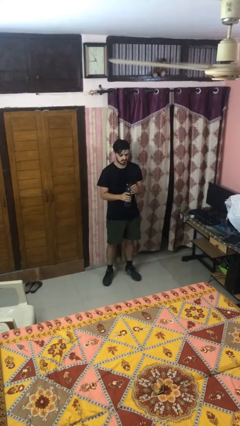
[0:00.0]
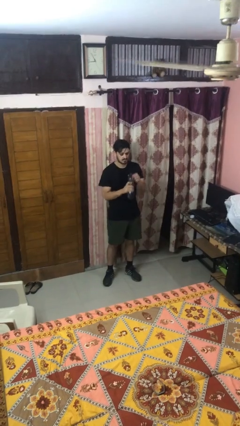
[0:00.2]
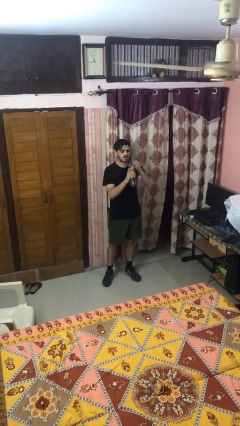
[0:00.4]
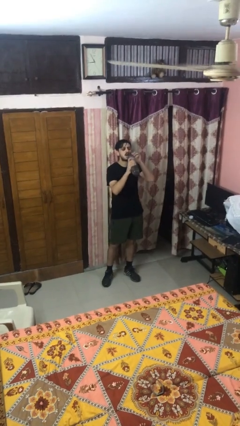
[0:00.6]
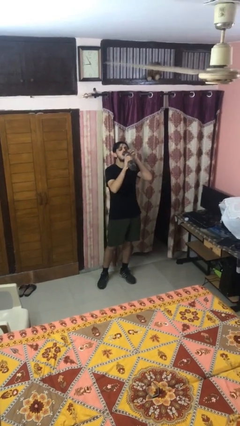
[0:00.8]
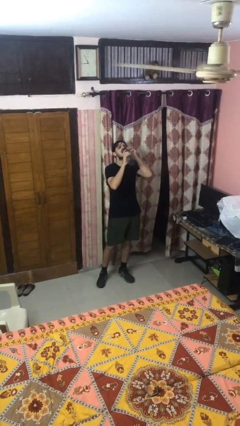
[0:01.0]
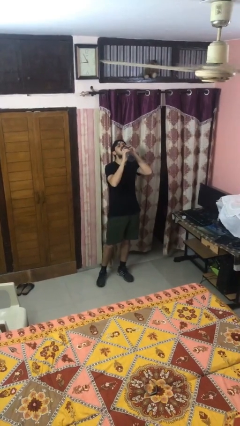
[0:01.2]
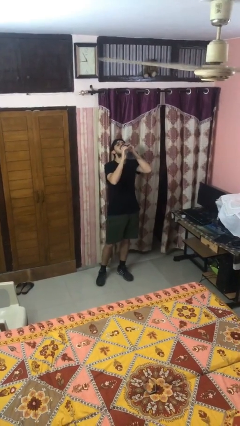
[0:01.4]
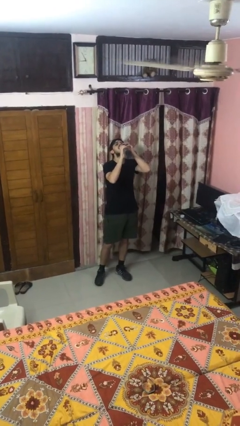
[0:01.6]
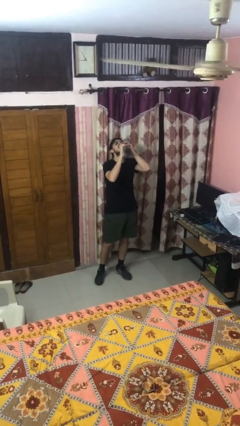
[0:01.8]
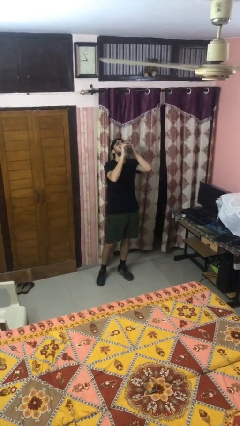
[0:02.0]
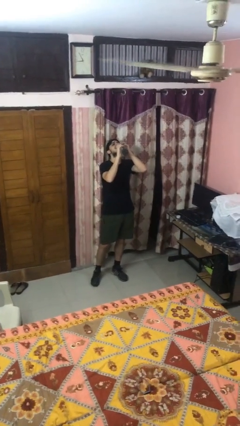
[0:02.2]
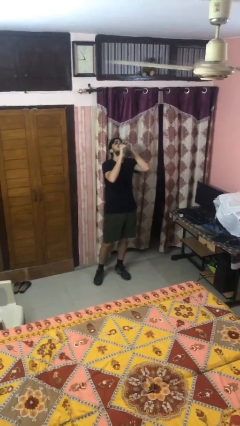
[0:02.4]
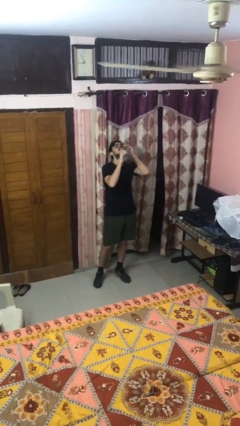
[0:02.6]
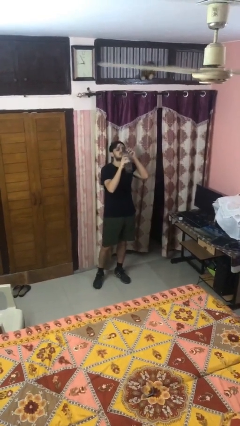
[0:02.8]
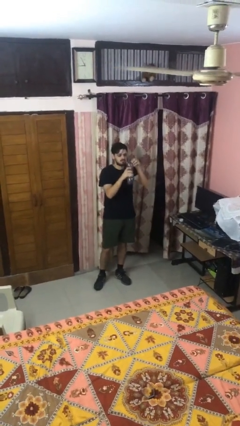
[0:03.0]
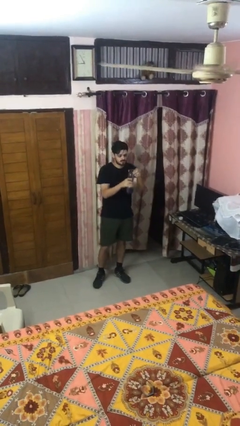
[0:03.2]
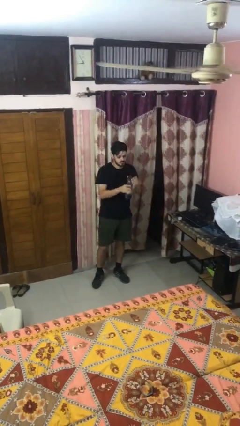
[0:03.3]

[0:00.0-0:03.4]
person drinks from bottle

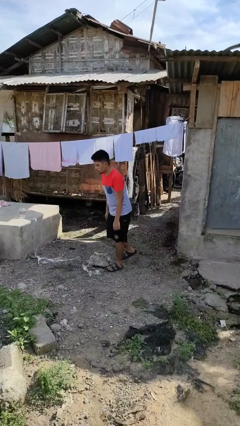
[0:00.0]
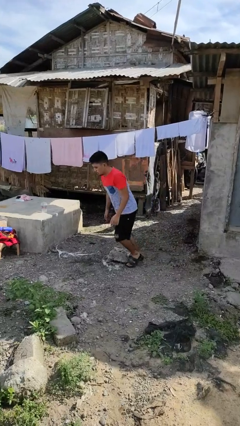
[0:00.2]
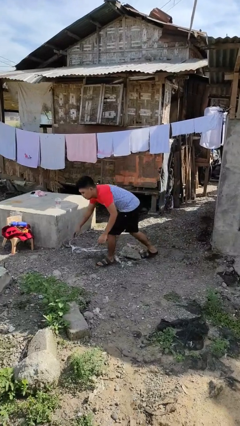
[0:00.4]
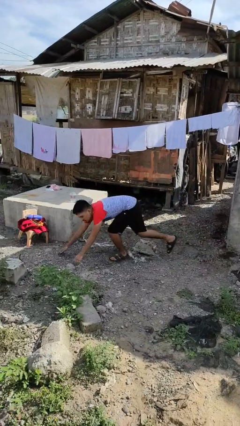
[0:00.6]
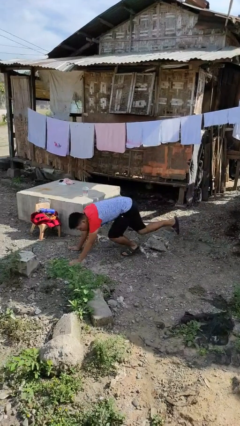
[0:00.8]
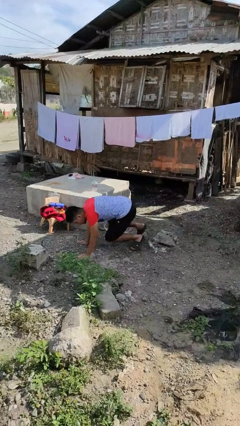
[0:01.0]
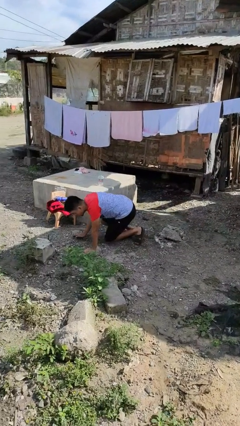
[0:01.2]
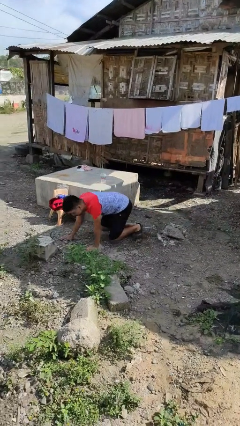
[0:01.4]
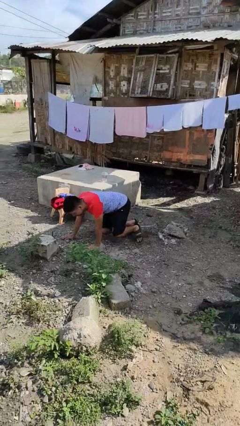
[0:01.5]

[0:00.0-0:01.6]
person trips on object on floor

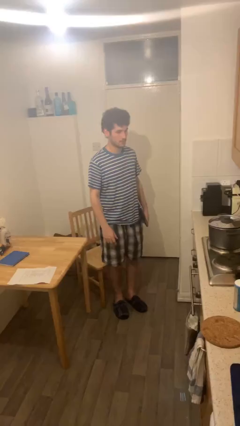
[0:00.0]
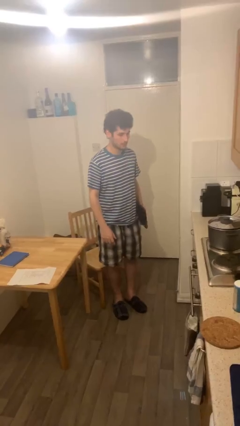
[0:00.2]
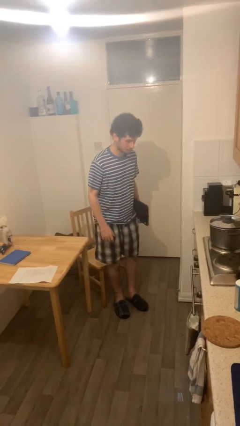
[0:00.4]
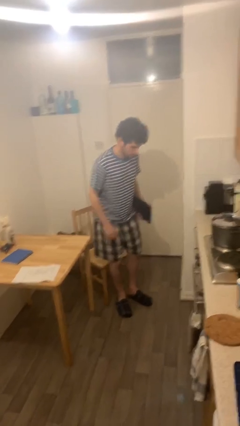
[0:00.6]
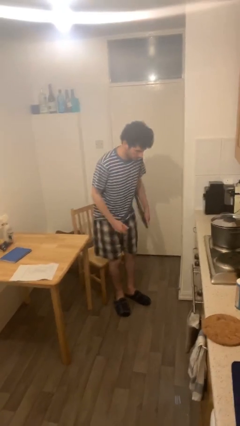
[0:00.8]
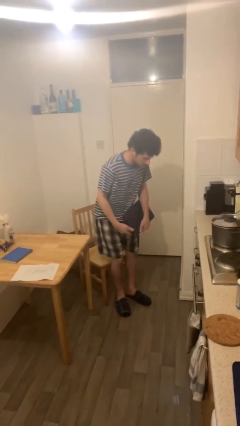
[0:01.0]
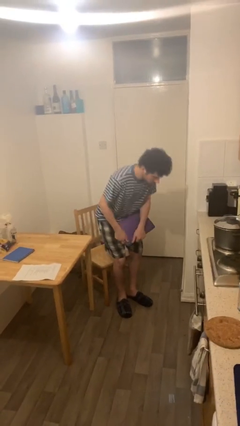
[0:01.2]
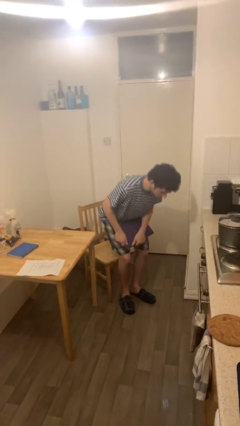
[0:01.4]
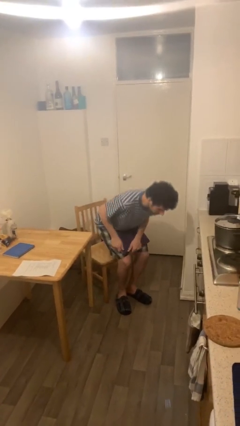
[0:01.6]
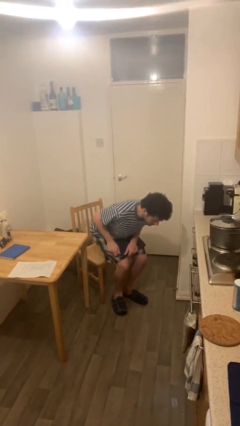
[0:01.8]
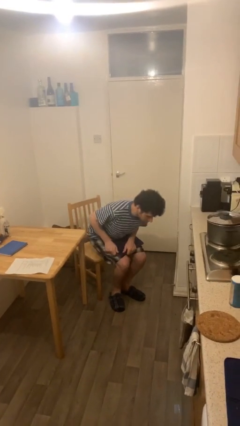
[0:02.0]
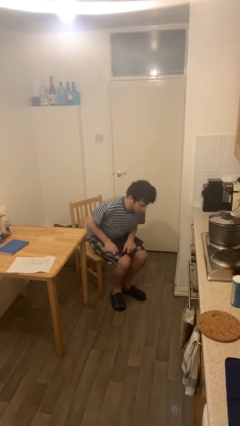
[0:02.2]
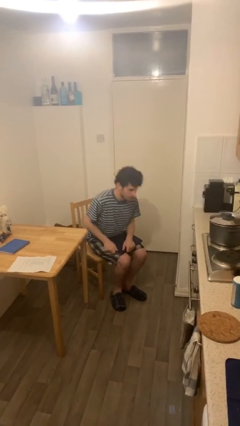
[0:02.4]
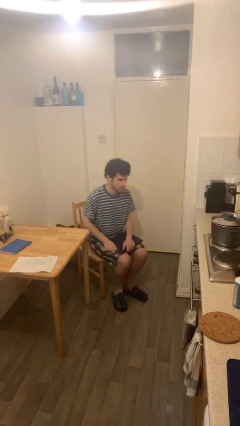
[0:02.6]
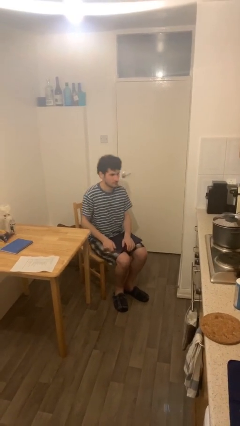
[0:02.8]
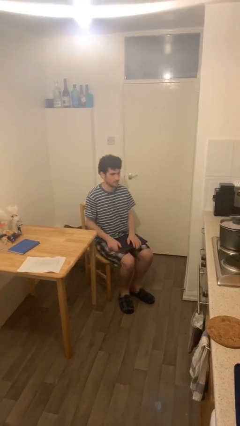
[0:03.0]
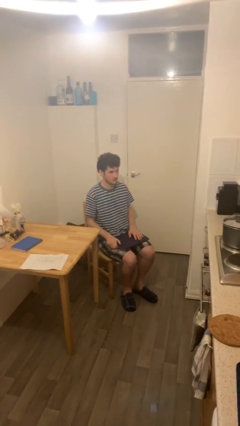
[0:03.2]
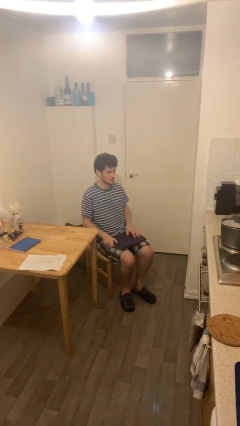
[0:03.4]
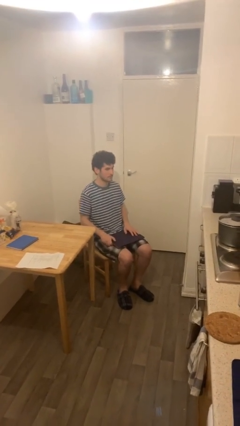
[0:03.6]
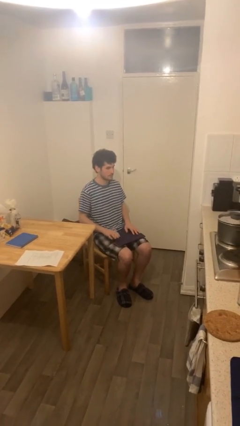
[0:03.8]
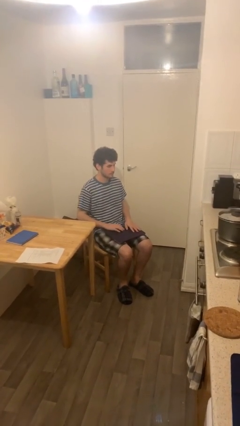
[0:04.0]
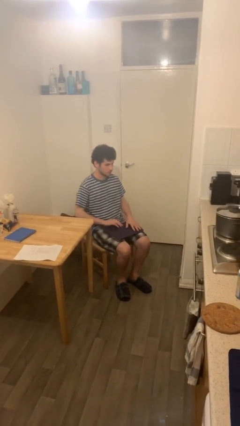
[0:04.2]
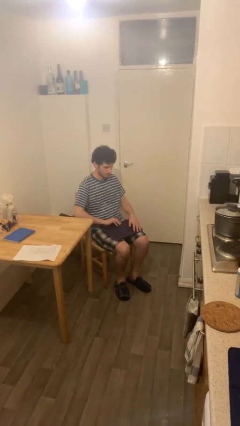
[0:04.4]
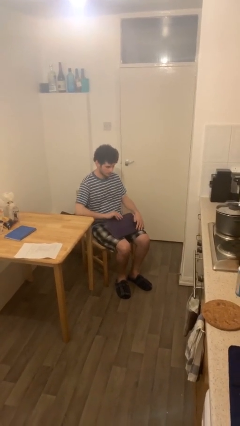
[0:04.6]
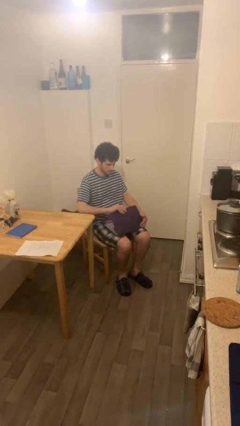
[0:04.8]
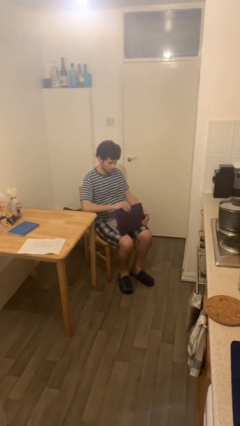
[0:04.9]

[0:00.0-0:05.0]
person sits down

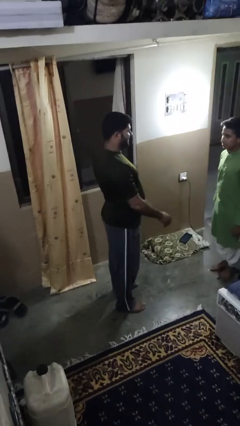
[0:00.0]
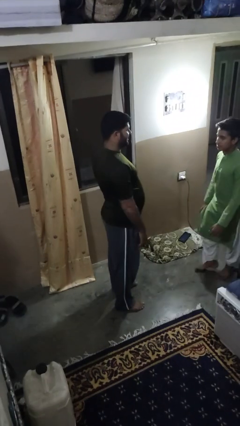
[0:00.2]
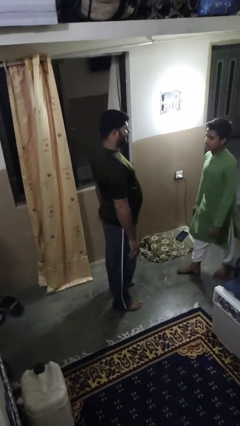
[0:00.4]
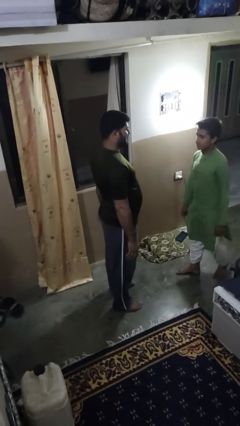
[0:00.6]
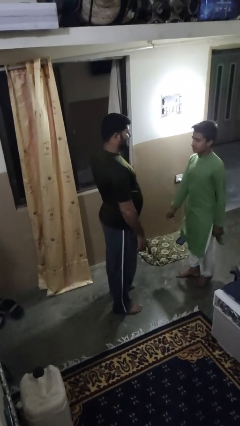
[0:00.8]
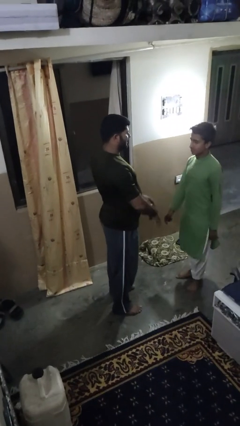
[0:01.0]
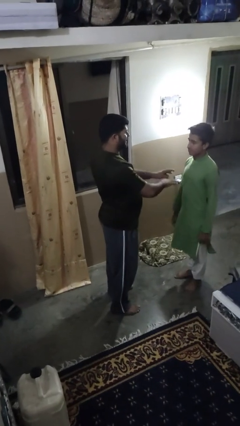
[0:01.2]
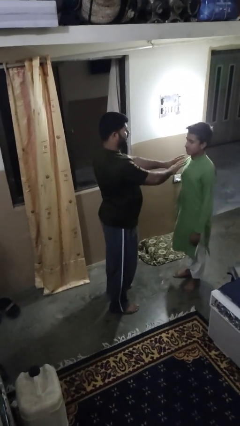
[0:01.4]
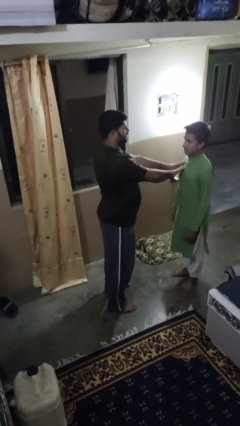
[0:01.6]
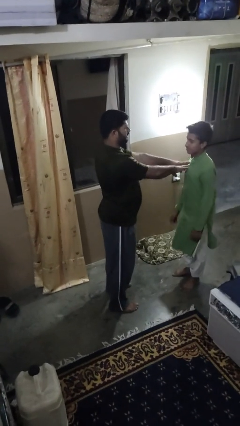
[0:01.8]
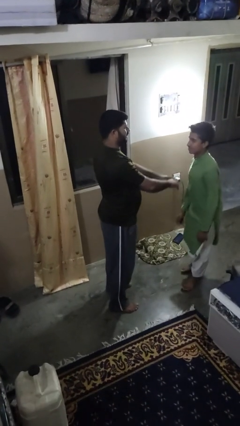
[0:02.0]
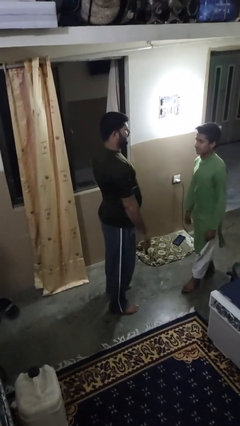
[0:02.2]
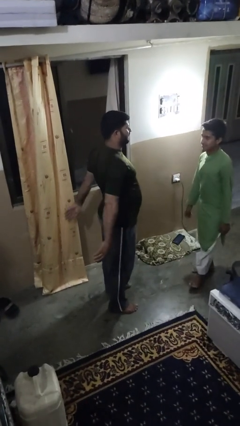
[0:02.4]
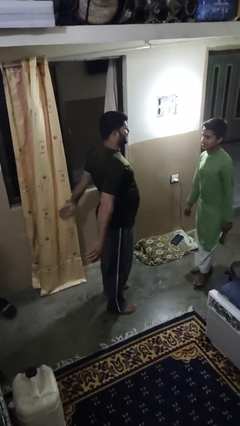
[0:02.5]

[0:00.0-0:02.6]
person shoves person

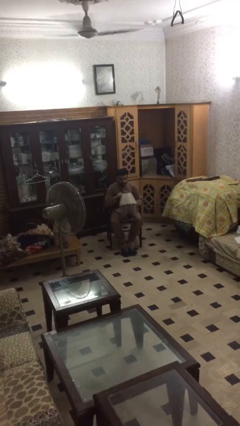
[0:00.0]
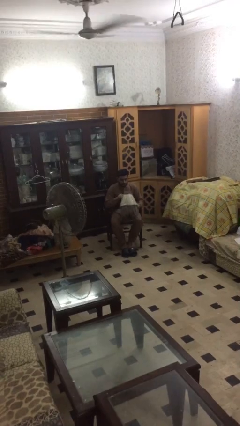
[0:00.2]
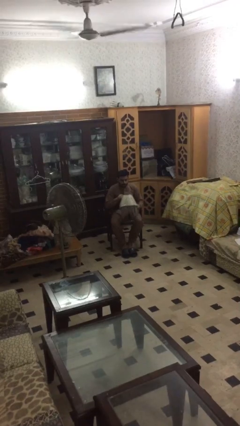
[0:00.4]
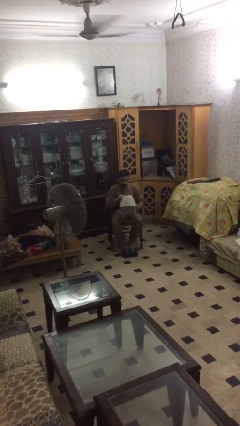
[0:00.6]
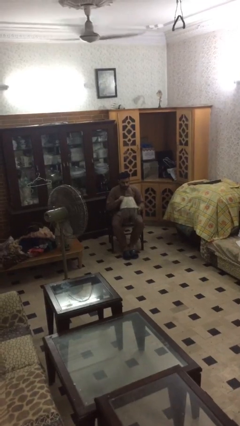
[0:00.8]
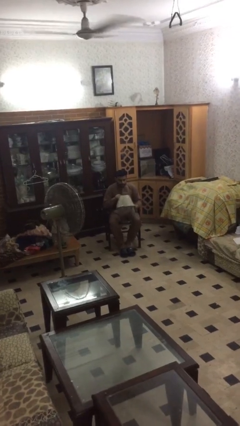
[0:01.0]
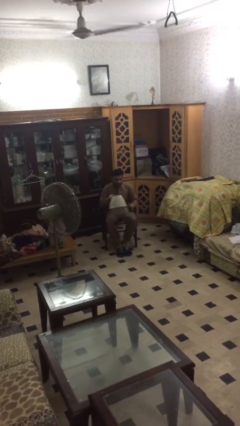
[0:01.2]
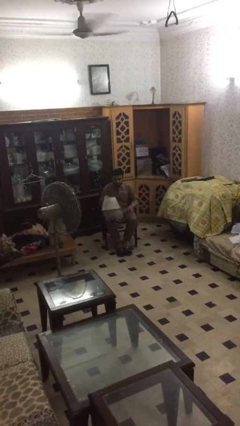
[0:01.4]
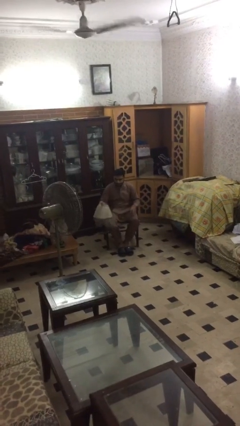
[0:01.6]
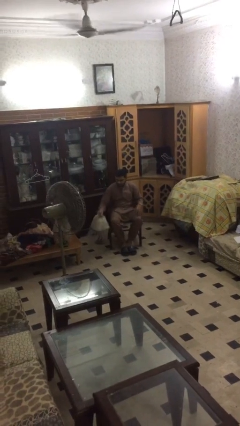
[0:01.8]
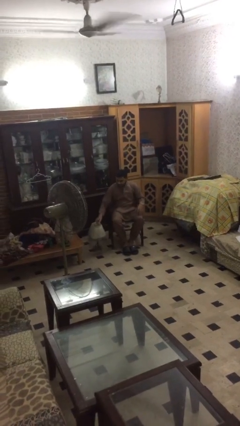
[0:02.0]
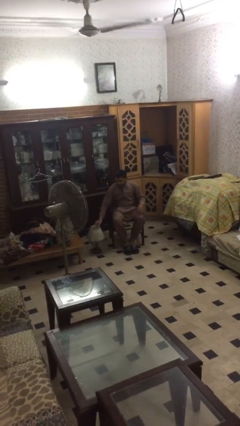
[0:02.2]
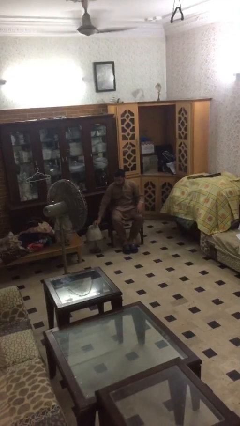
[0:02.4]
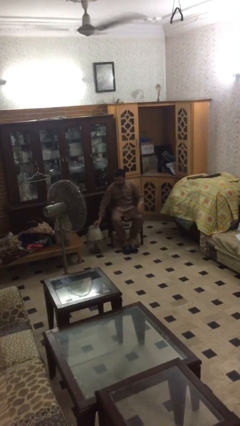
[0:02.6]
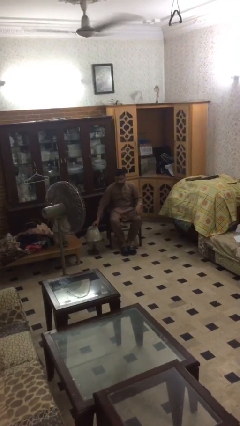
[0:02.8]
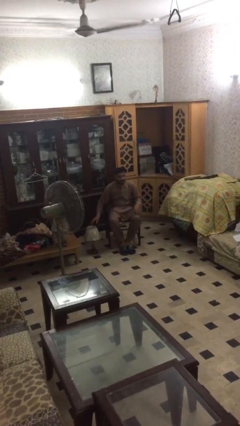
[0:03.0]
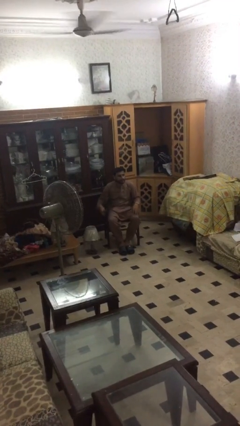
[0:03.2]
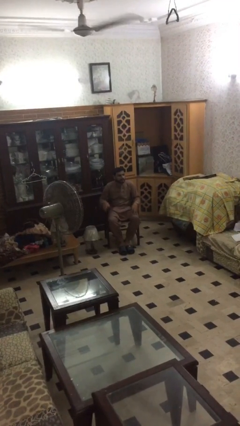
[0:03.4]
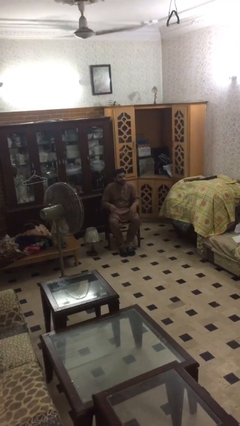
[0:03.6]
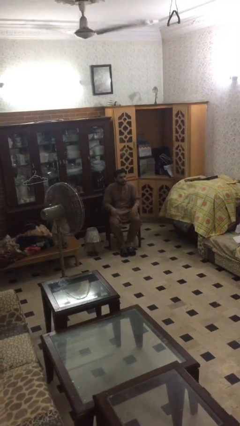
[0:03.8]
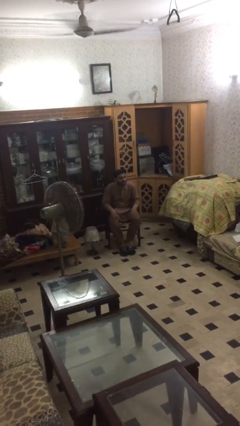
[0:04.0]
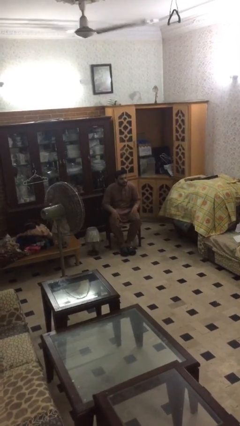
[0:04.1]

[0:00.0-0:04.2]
person puts down object on floor

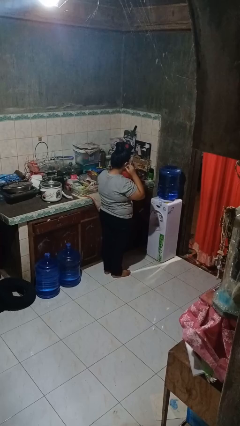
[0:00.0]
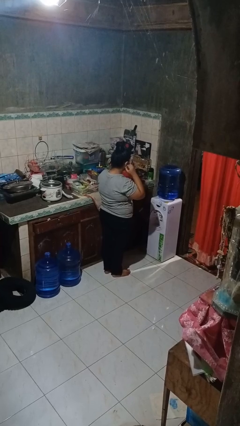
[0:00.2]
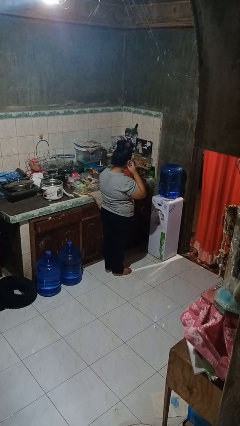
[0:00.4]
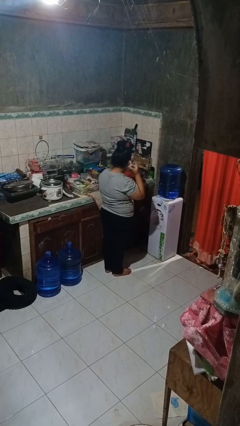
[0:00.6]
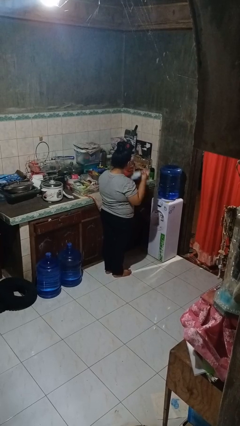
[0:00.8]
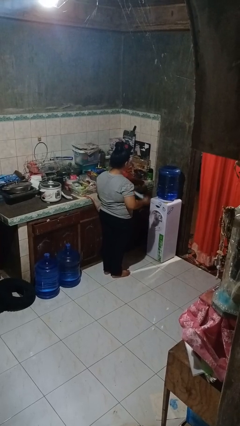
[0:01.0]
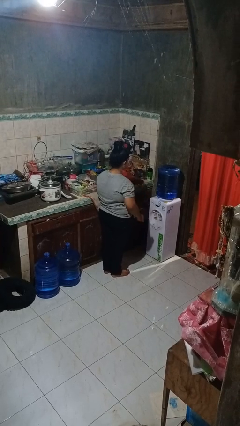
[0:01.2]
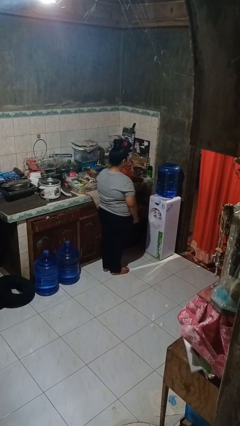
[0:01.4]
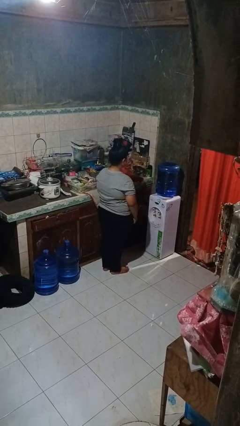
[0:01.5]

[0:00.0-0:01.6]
person takes off facemask
